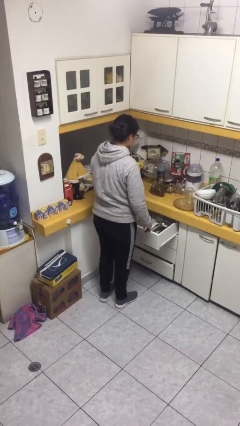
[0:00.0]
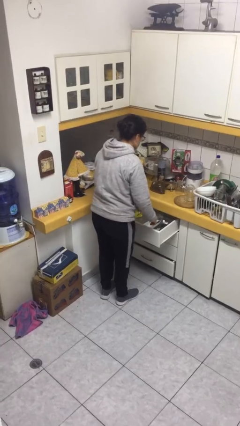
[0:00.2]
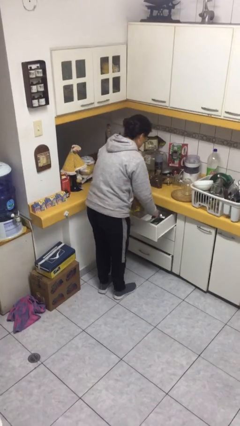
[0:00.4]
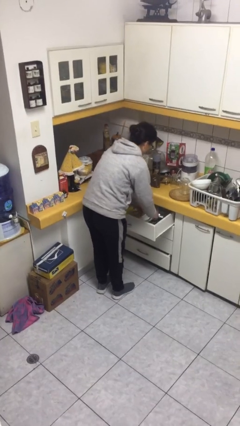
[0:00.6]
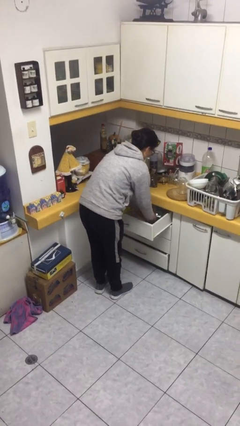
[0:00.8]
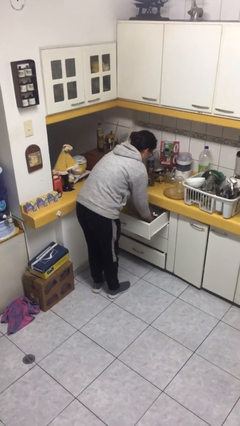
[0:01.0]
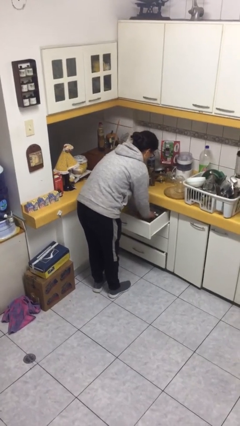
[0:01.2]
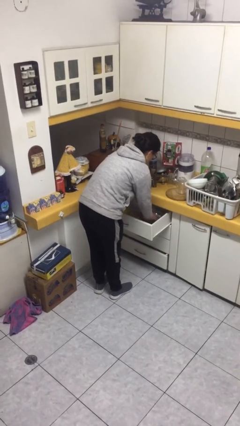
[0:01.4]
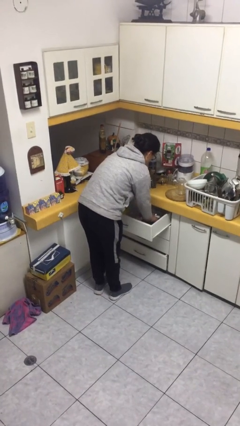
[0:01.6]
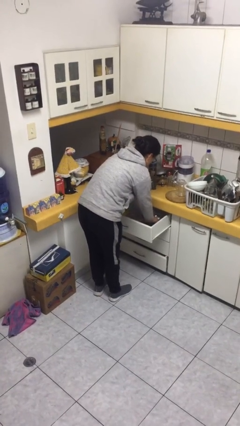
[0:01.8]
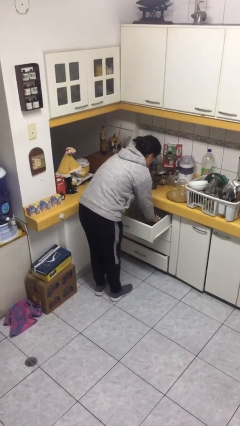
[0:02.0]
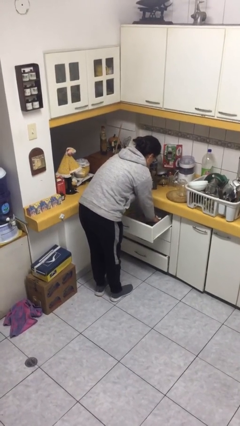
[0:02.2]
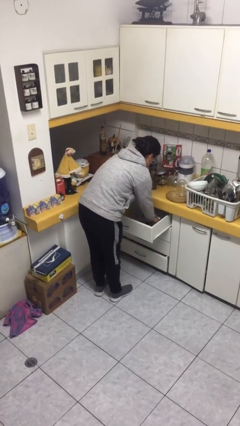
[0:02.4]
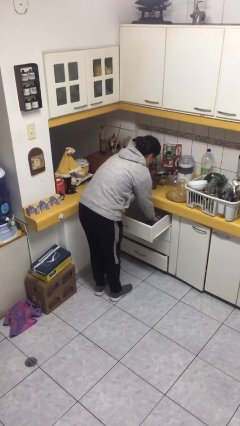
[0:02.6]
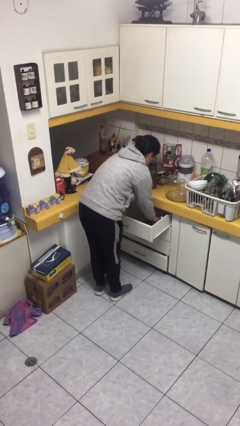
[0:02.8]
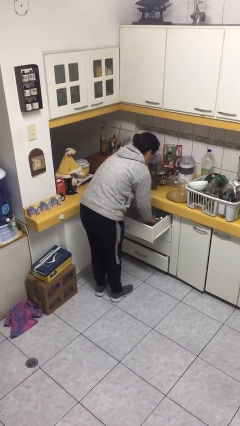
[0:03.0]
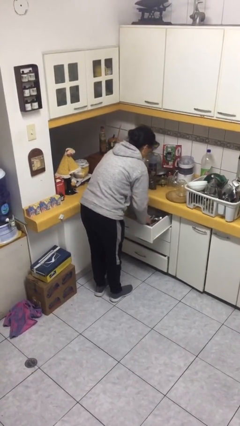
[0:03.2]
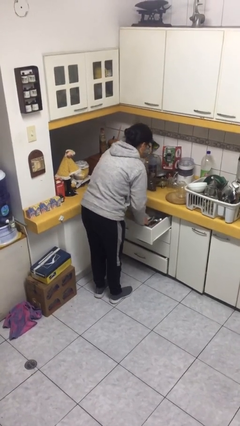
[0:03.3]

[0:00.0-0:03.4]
person searches in kitchen drawer

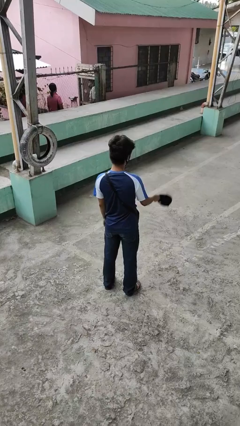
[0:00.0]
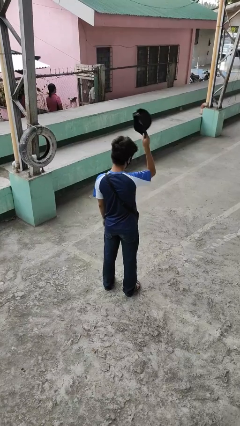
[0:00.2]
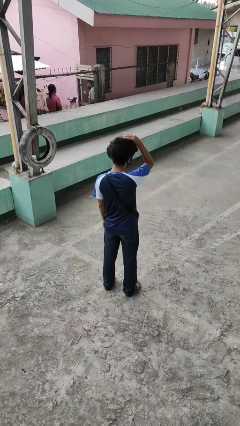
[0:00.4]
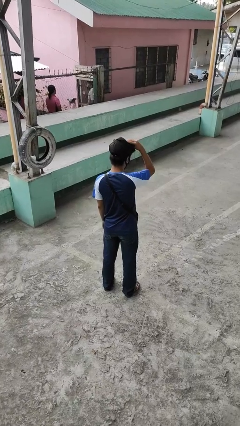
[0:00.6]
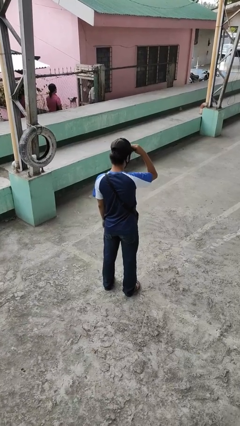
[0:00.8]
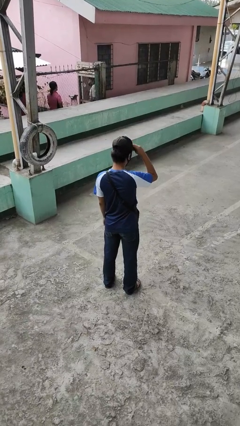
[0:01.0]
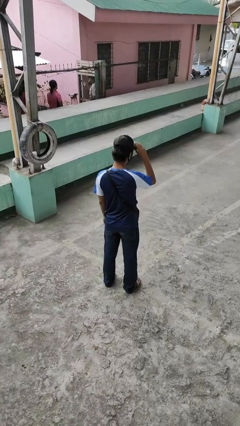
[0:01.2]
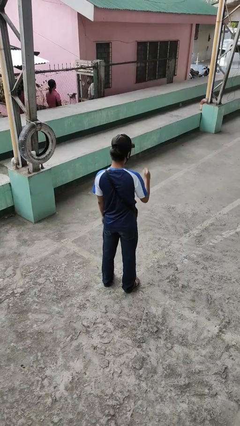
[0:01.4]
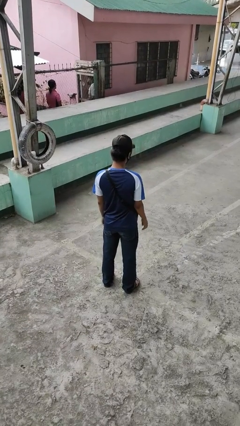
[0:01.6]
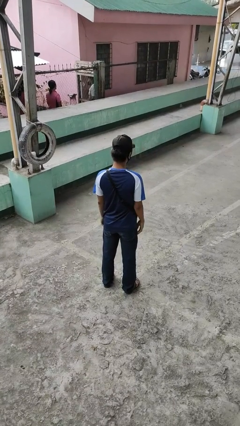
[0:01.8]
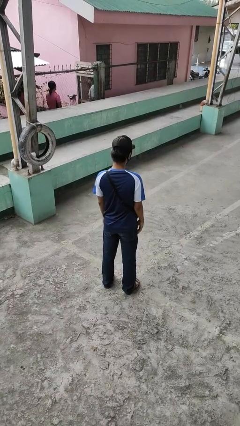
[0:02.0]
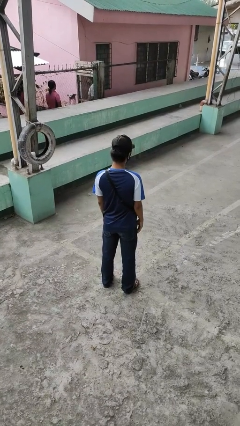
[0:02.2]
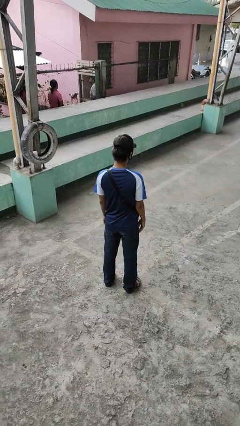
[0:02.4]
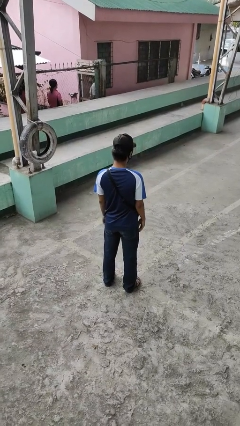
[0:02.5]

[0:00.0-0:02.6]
person puts on hat

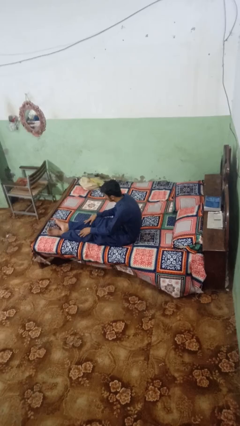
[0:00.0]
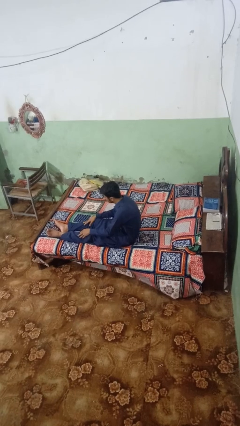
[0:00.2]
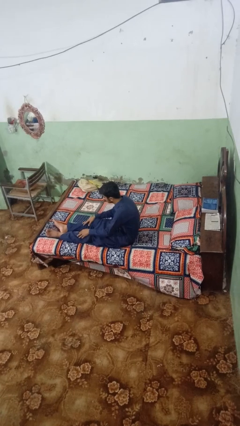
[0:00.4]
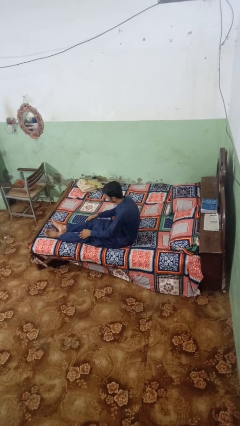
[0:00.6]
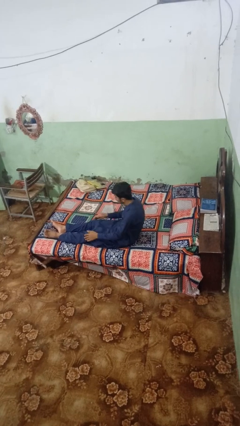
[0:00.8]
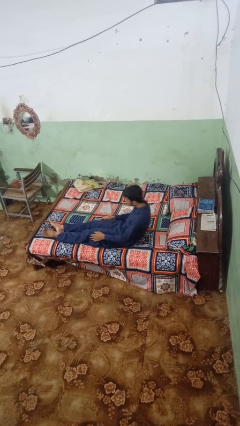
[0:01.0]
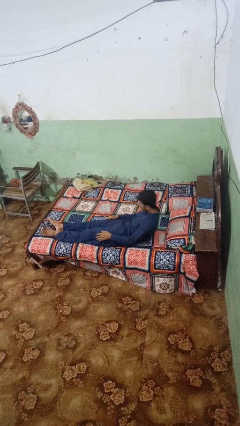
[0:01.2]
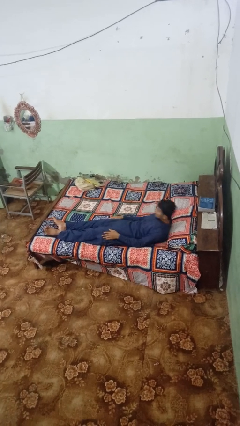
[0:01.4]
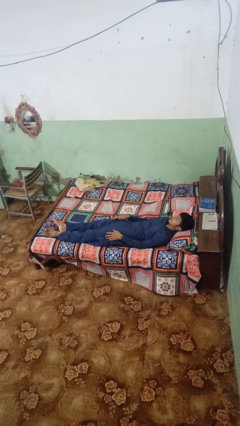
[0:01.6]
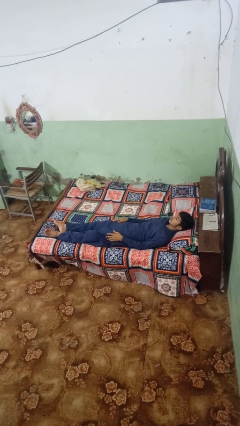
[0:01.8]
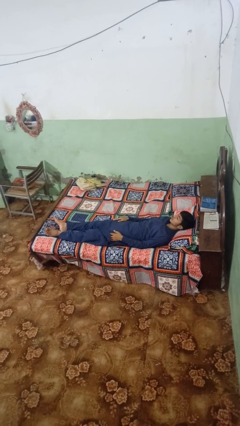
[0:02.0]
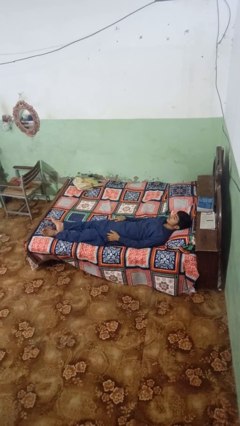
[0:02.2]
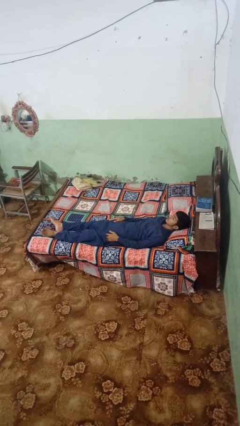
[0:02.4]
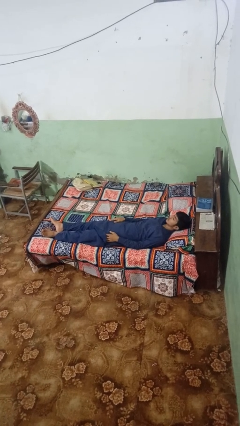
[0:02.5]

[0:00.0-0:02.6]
person lies down on bed

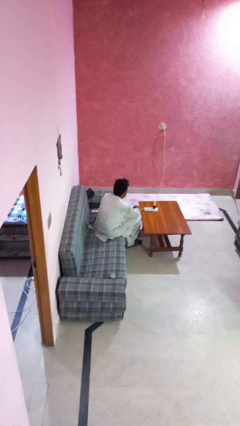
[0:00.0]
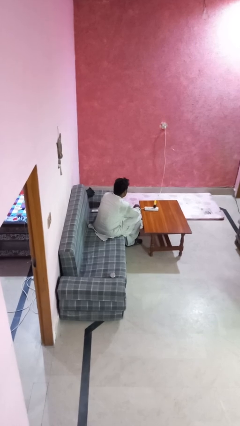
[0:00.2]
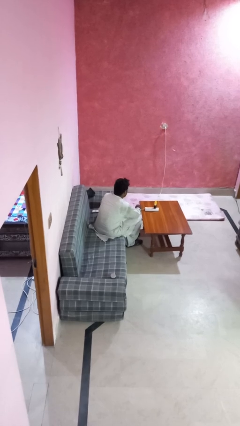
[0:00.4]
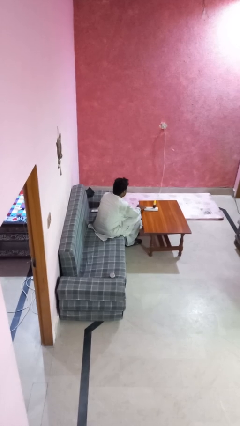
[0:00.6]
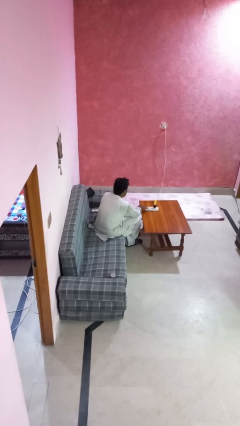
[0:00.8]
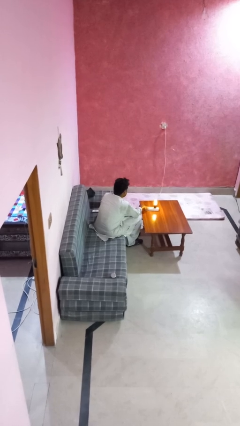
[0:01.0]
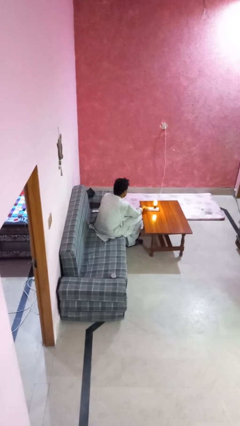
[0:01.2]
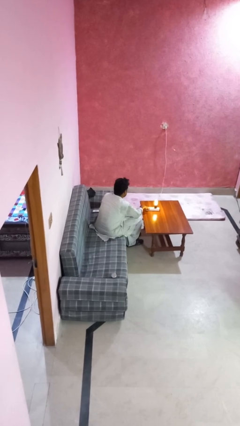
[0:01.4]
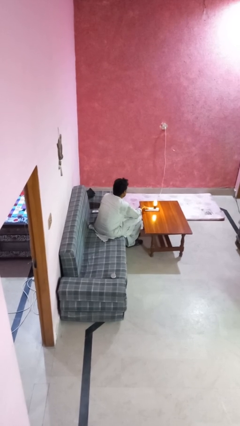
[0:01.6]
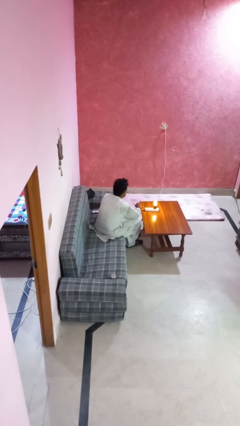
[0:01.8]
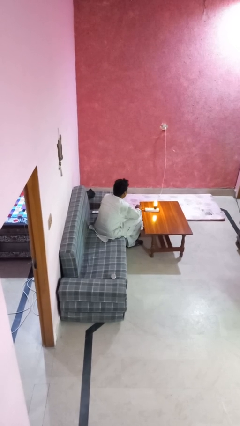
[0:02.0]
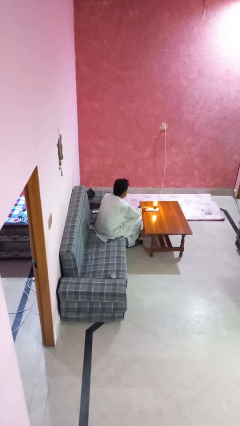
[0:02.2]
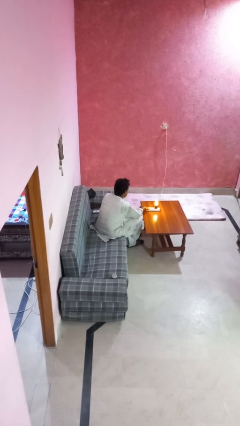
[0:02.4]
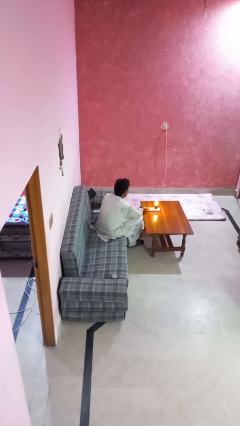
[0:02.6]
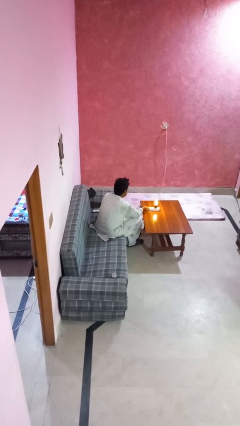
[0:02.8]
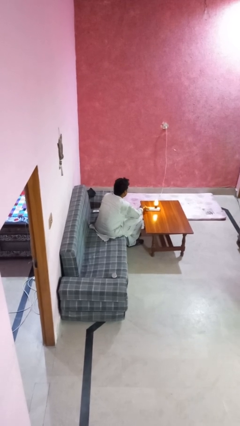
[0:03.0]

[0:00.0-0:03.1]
person turns on lamp

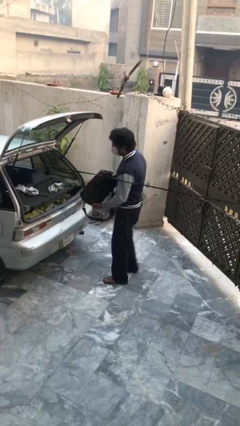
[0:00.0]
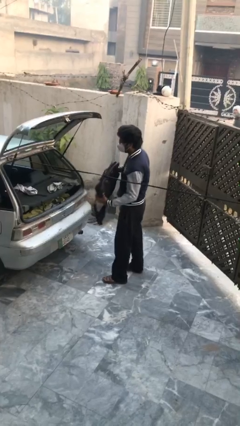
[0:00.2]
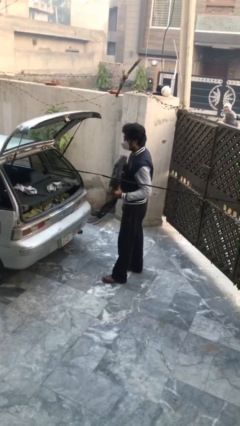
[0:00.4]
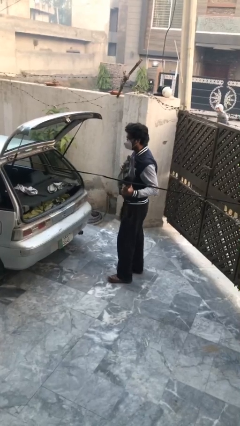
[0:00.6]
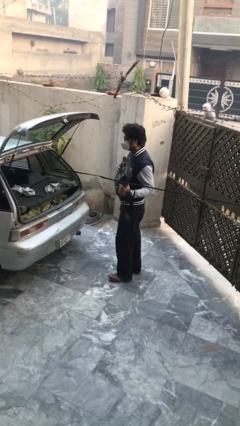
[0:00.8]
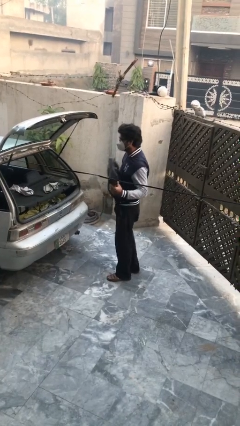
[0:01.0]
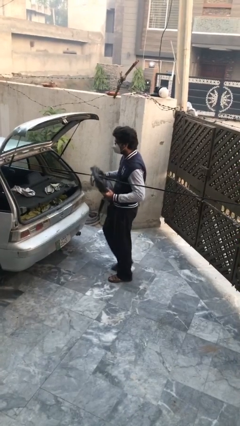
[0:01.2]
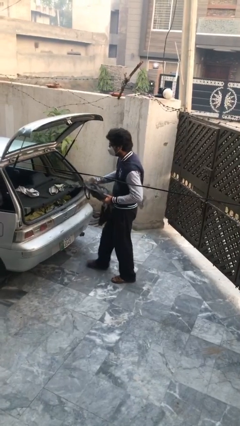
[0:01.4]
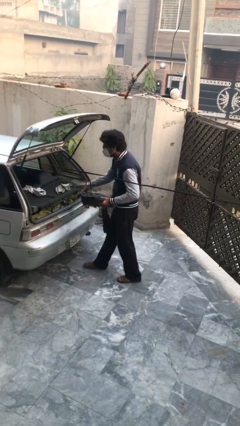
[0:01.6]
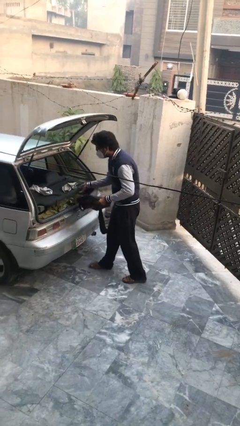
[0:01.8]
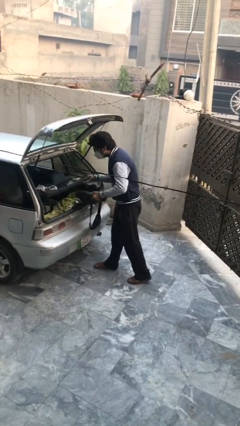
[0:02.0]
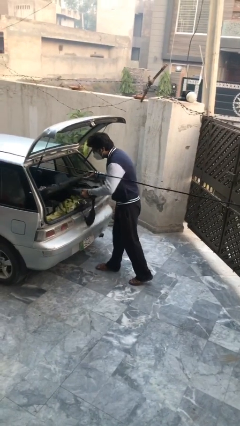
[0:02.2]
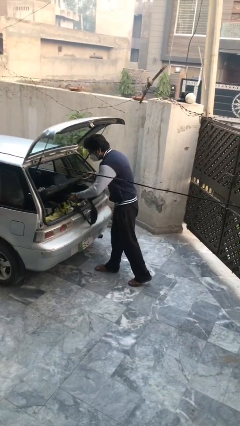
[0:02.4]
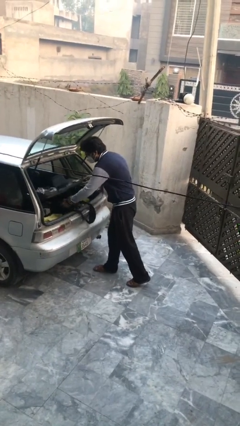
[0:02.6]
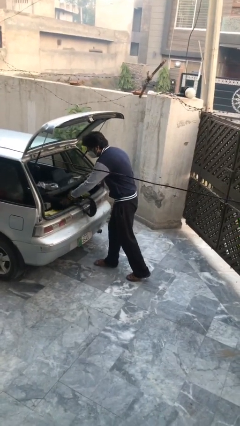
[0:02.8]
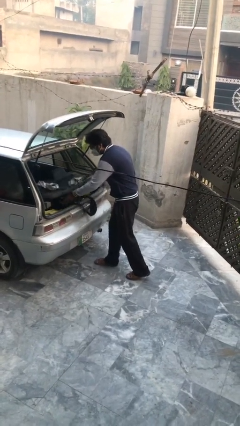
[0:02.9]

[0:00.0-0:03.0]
person loads car

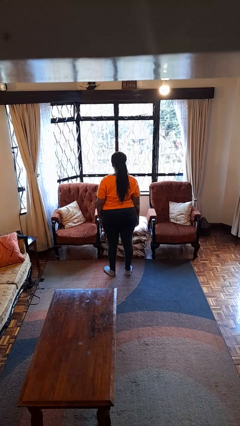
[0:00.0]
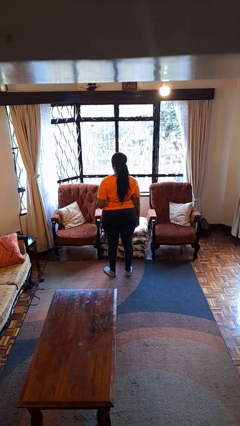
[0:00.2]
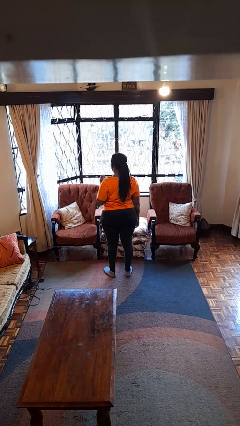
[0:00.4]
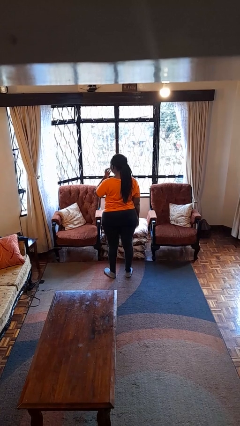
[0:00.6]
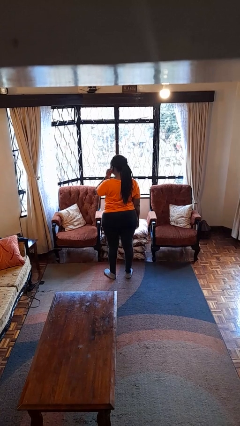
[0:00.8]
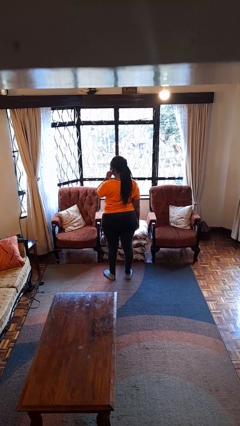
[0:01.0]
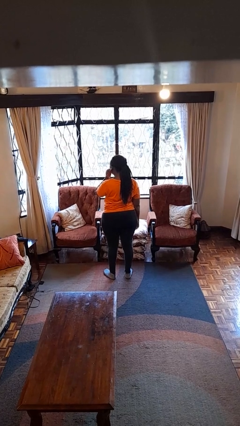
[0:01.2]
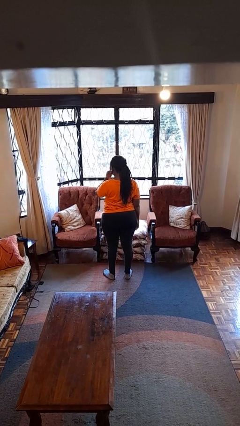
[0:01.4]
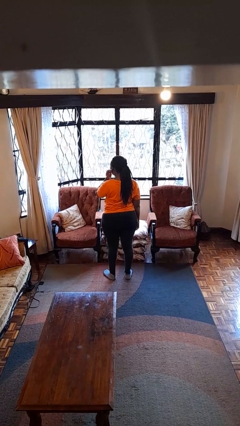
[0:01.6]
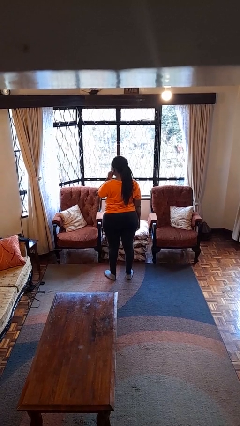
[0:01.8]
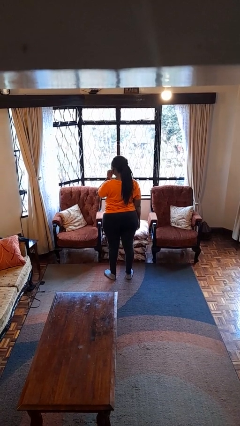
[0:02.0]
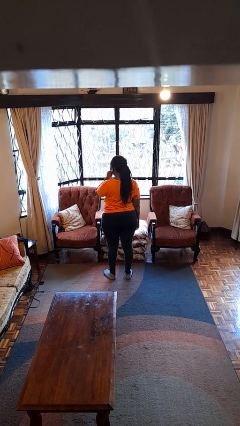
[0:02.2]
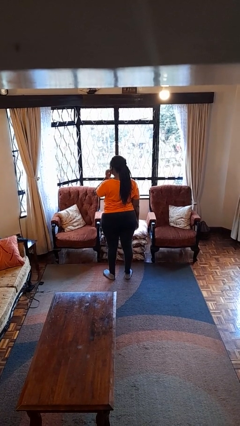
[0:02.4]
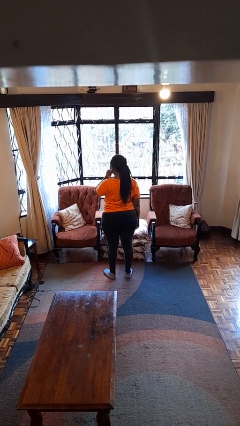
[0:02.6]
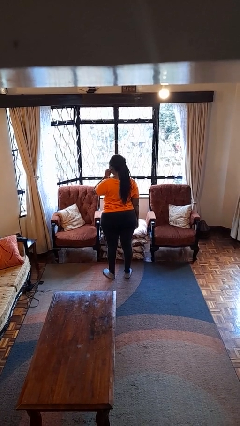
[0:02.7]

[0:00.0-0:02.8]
person touches earlobe
